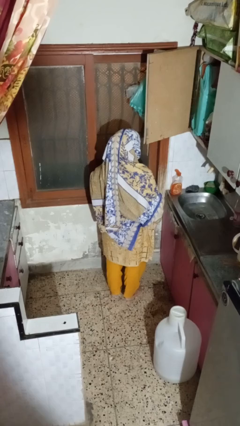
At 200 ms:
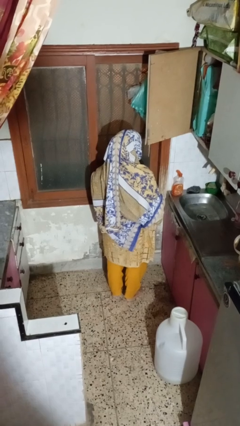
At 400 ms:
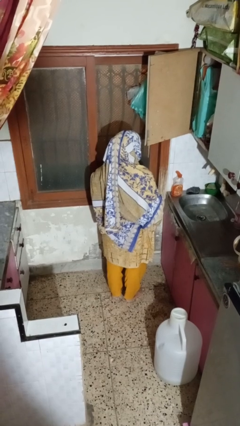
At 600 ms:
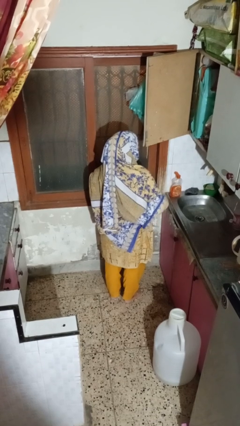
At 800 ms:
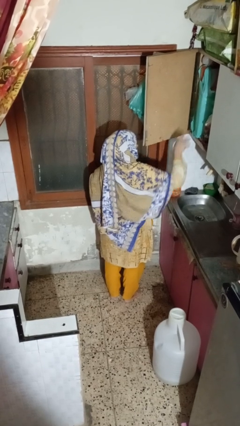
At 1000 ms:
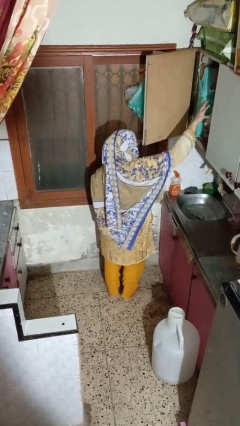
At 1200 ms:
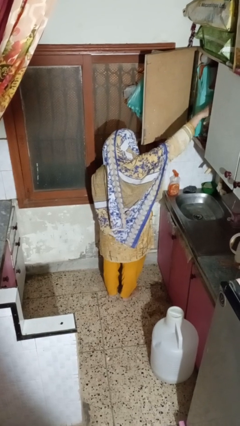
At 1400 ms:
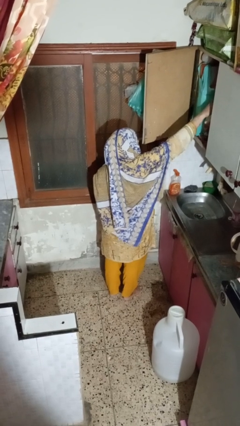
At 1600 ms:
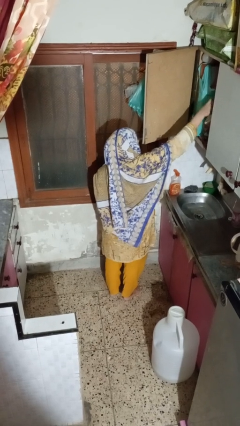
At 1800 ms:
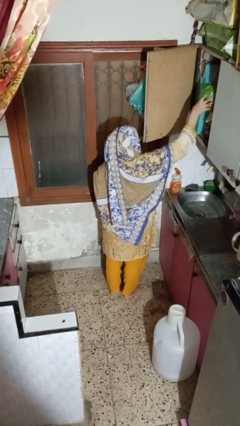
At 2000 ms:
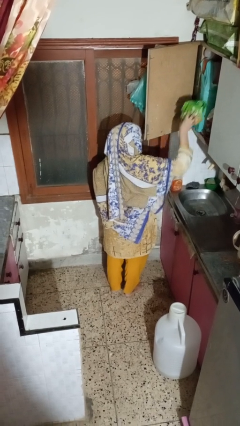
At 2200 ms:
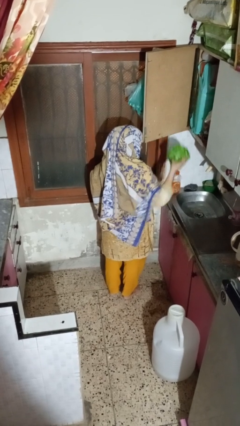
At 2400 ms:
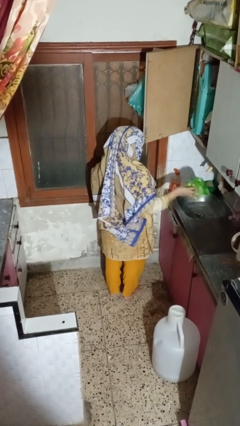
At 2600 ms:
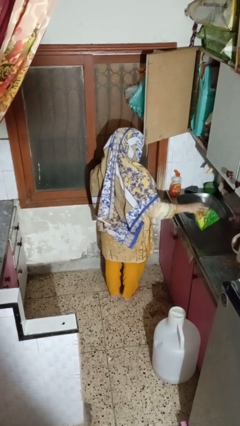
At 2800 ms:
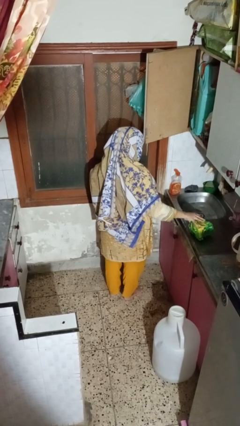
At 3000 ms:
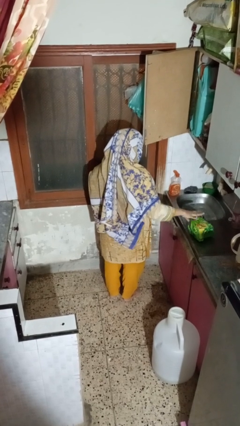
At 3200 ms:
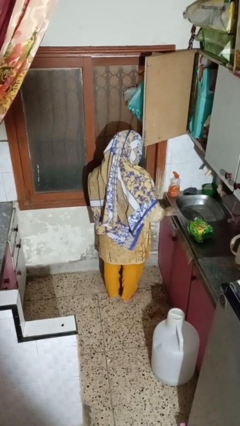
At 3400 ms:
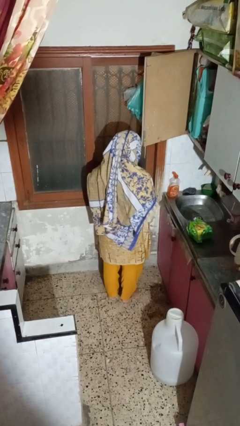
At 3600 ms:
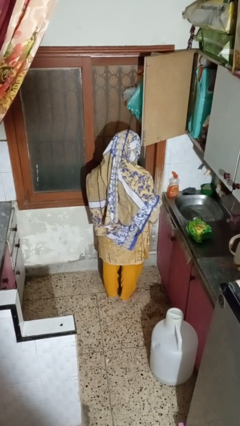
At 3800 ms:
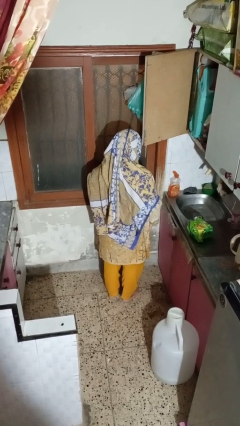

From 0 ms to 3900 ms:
person takes object from cabinet

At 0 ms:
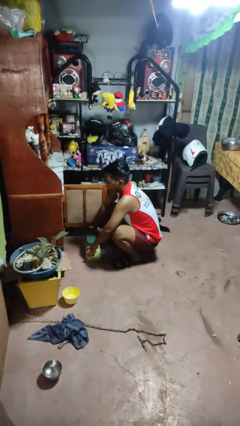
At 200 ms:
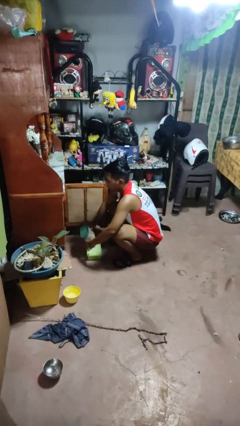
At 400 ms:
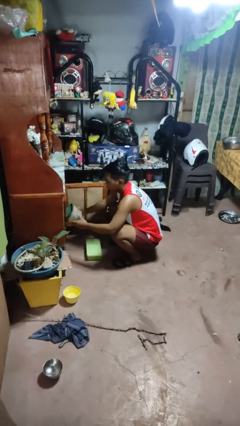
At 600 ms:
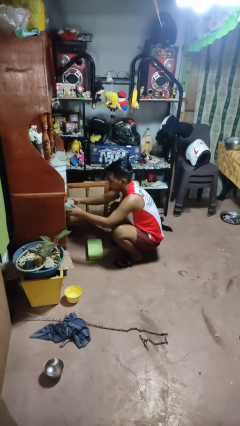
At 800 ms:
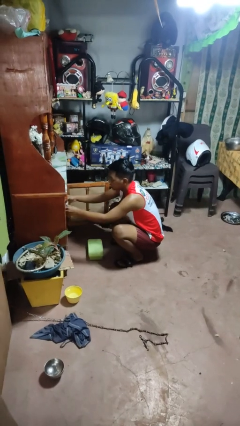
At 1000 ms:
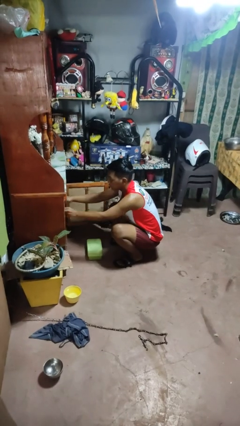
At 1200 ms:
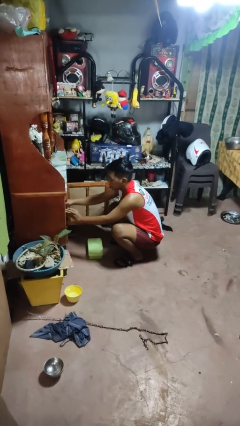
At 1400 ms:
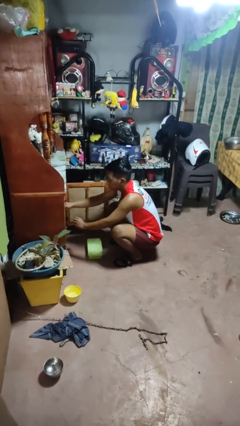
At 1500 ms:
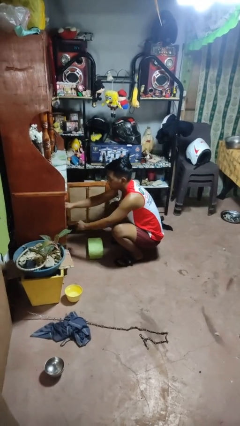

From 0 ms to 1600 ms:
person puts object in cabinet

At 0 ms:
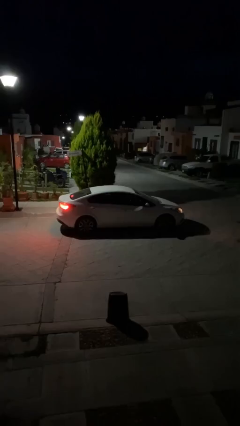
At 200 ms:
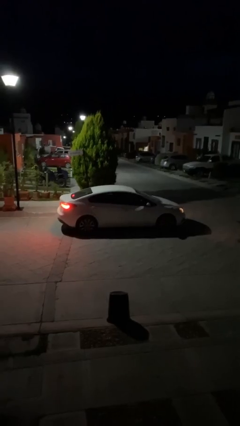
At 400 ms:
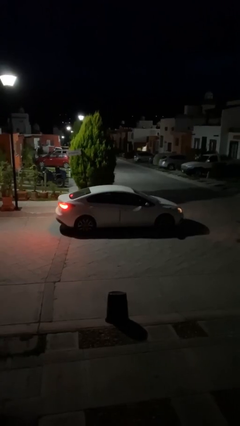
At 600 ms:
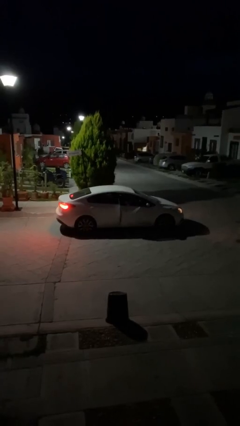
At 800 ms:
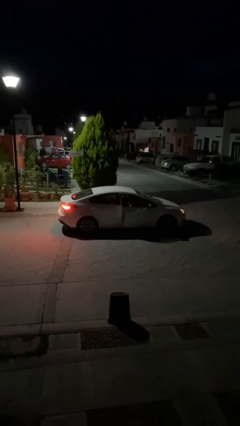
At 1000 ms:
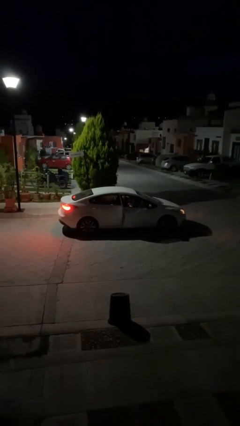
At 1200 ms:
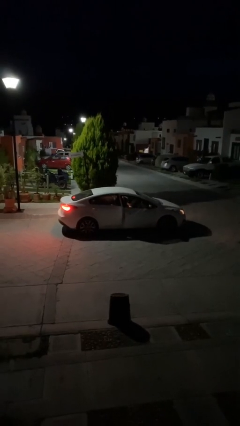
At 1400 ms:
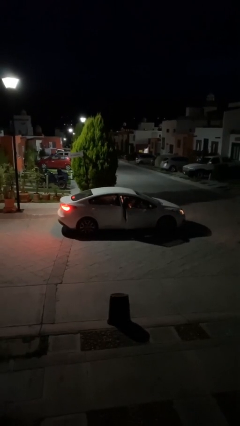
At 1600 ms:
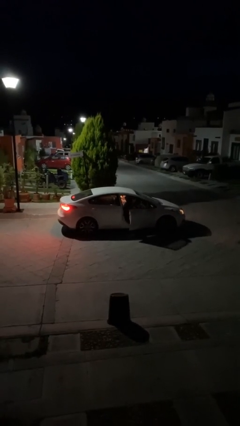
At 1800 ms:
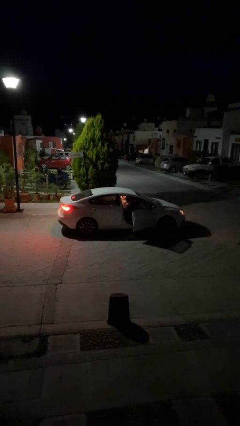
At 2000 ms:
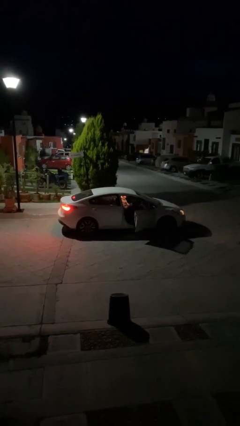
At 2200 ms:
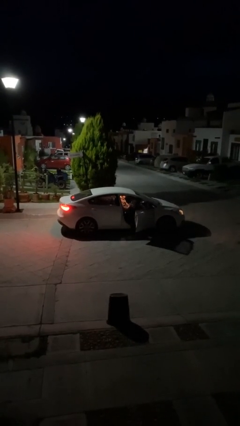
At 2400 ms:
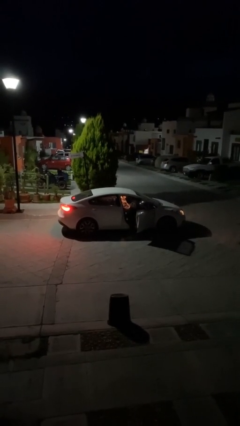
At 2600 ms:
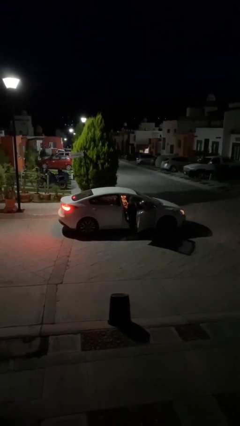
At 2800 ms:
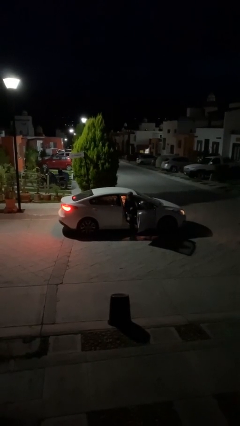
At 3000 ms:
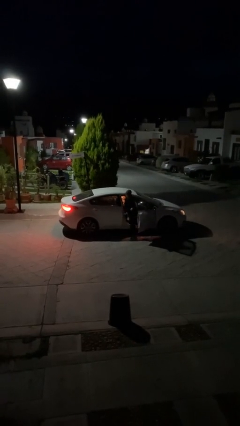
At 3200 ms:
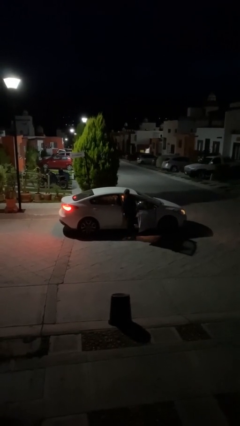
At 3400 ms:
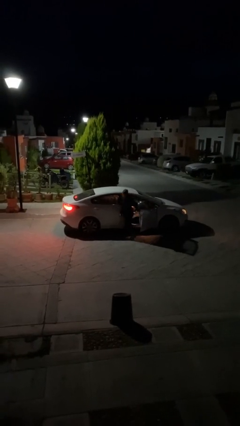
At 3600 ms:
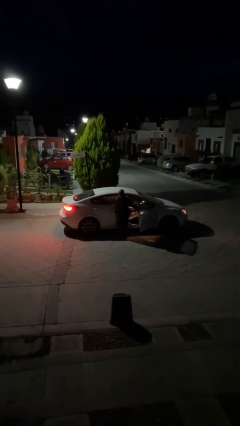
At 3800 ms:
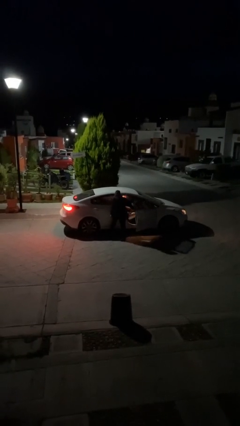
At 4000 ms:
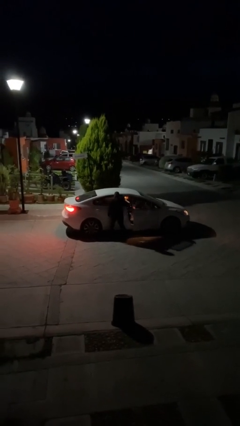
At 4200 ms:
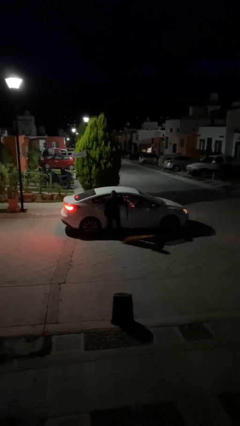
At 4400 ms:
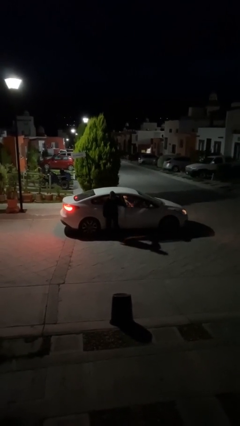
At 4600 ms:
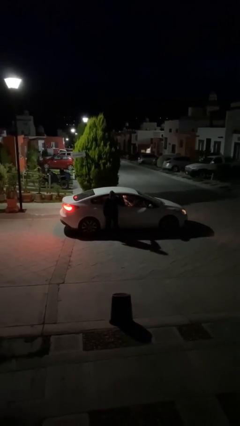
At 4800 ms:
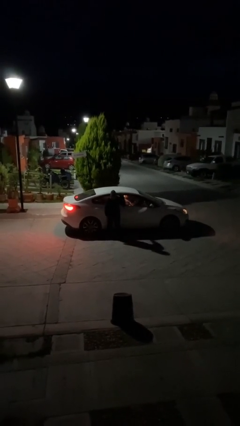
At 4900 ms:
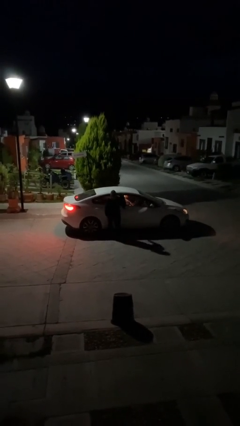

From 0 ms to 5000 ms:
car drops off person

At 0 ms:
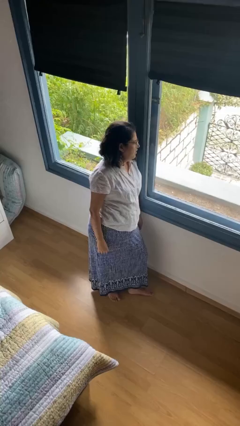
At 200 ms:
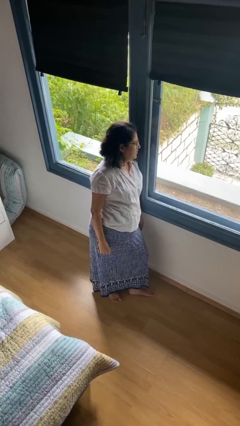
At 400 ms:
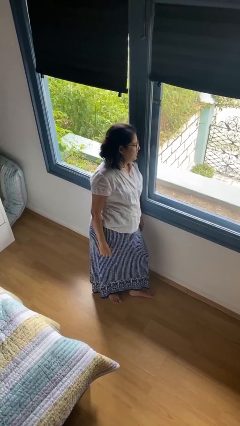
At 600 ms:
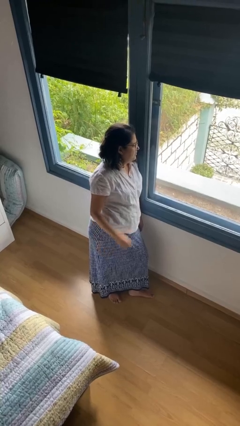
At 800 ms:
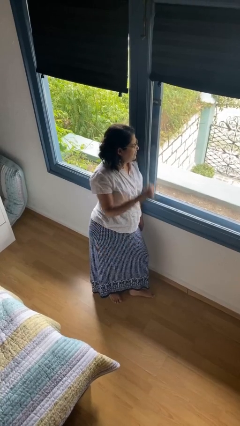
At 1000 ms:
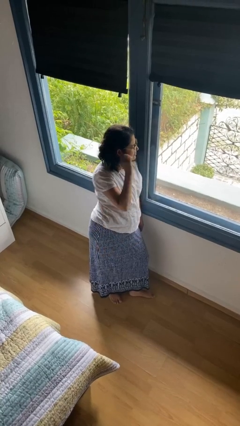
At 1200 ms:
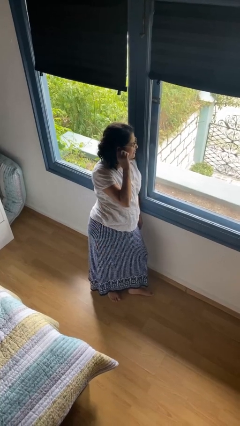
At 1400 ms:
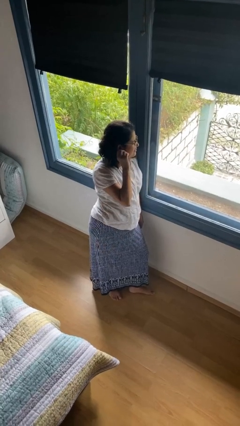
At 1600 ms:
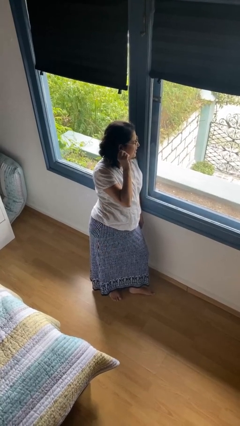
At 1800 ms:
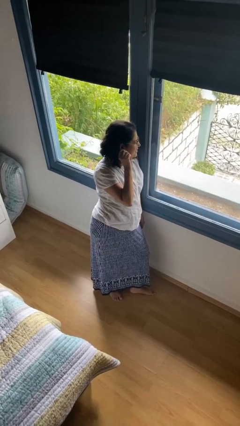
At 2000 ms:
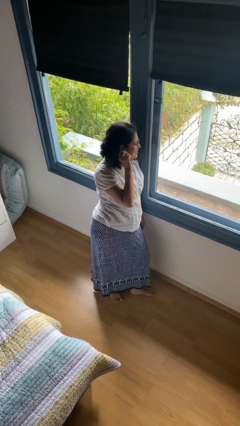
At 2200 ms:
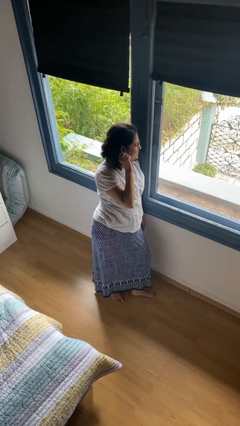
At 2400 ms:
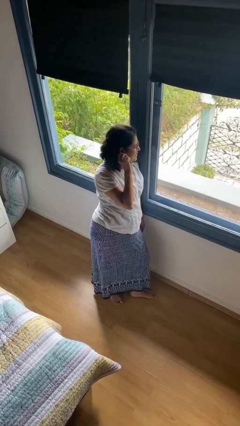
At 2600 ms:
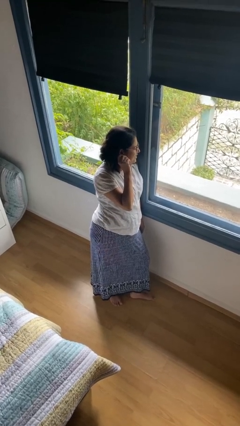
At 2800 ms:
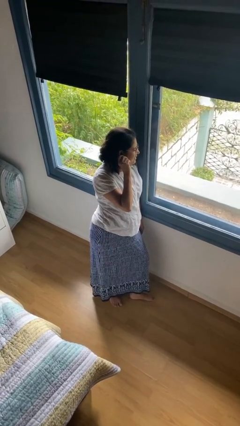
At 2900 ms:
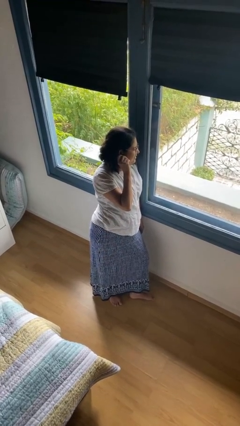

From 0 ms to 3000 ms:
person touches earlobe

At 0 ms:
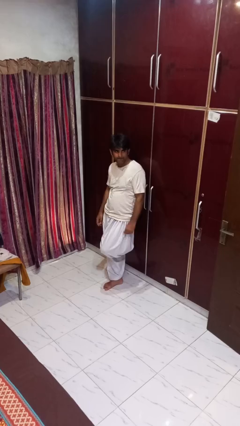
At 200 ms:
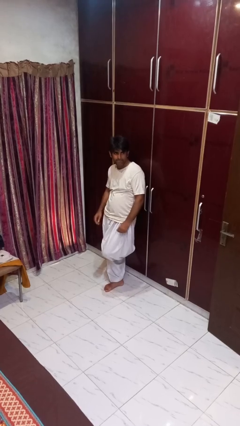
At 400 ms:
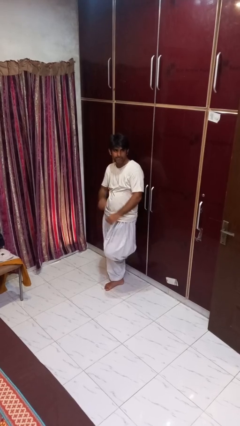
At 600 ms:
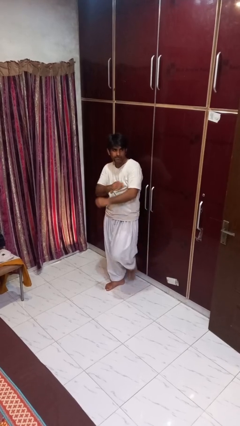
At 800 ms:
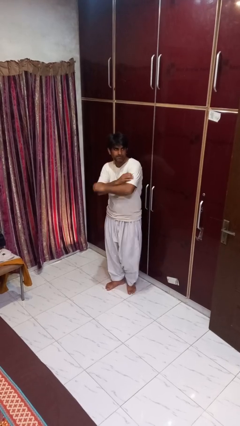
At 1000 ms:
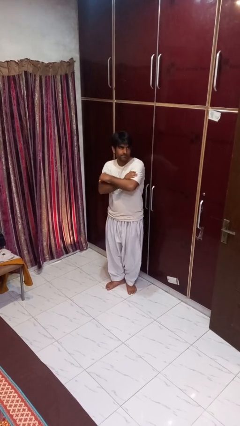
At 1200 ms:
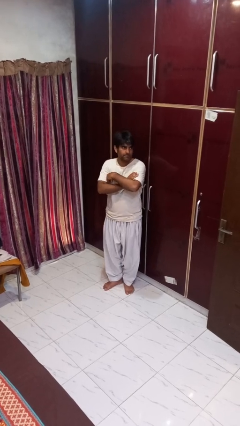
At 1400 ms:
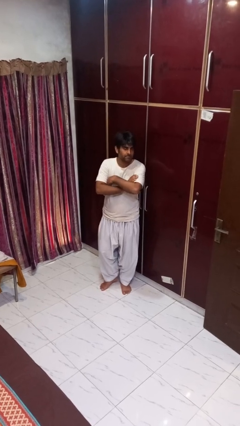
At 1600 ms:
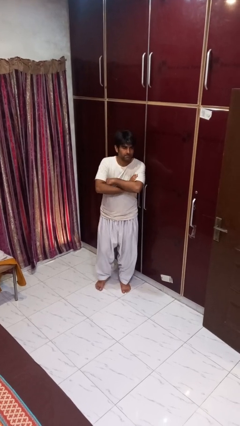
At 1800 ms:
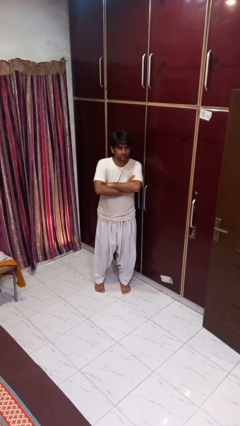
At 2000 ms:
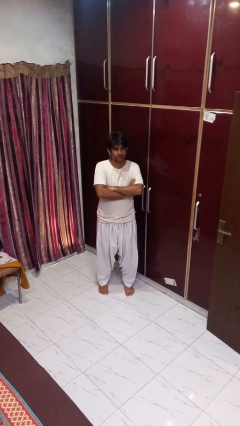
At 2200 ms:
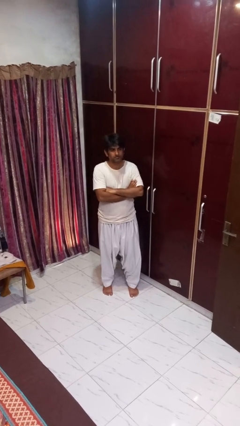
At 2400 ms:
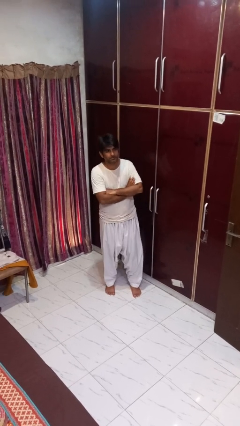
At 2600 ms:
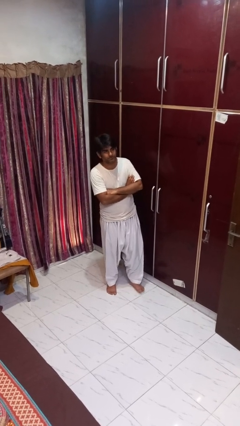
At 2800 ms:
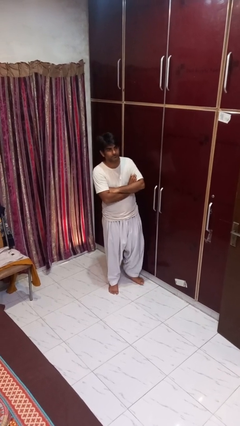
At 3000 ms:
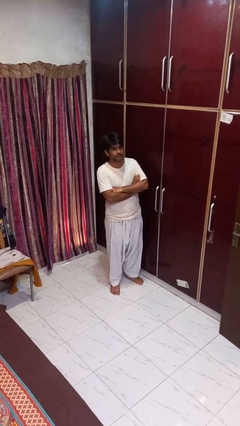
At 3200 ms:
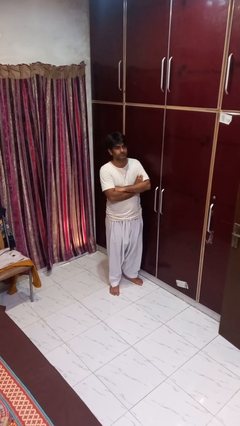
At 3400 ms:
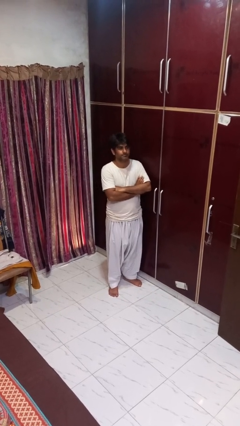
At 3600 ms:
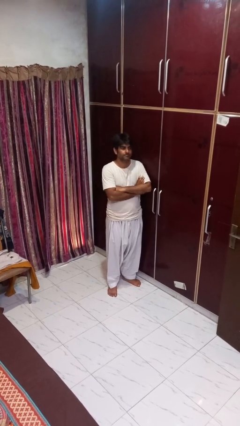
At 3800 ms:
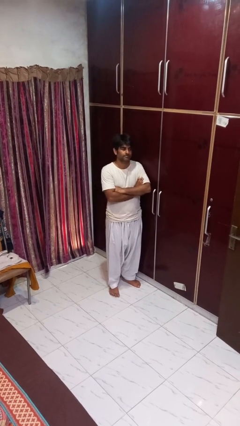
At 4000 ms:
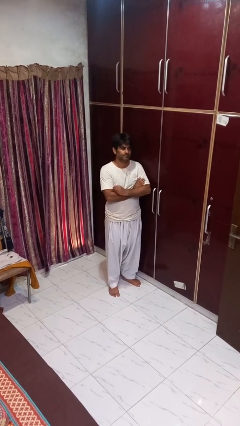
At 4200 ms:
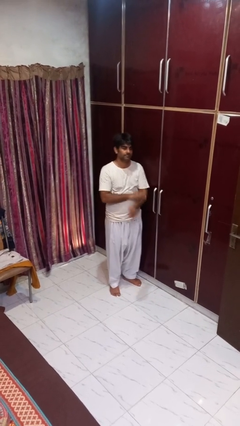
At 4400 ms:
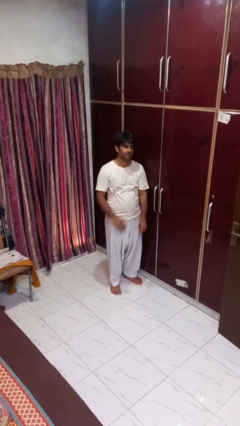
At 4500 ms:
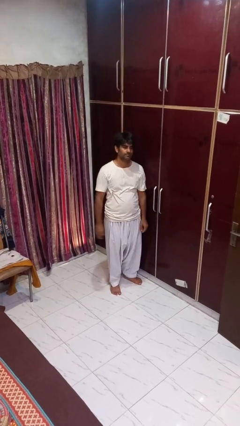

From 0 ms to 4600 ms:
person crosses arms
